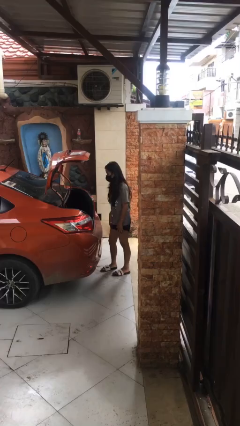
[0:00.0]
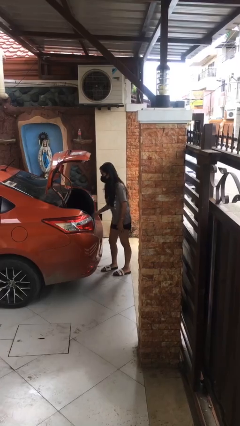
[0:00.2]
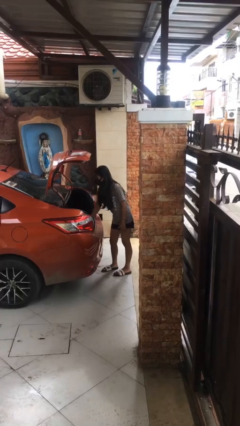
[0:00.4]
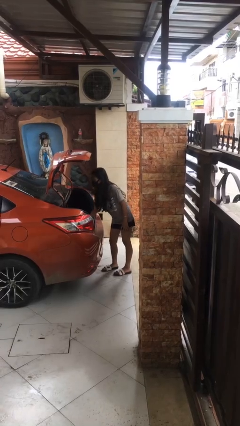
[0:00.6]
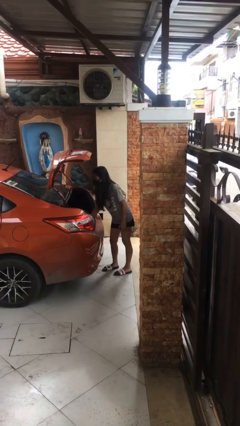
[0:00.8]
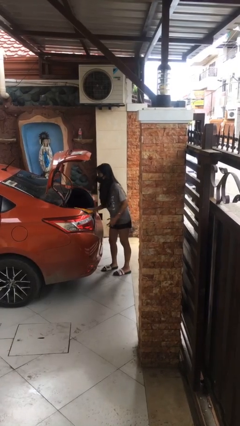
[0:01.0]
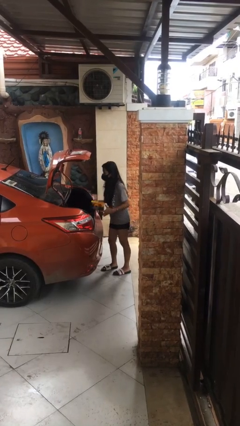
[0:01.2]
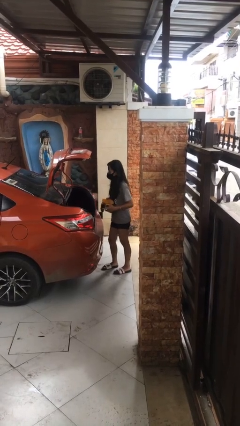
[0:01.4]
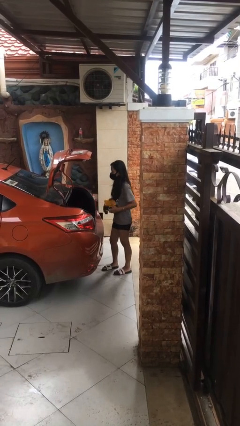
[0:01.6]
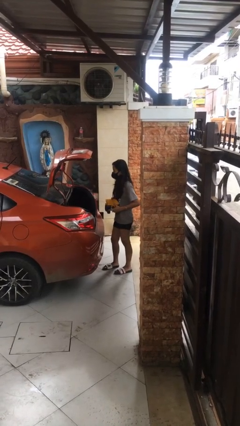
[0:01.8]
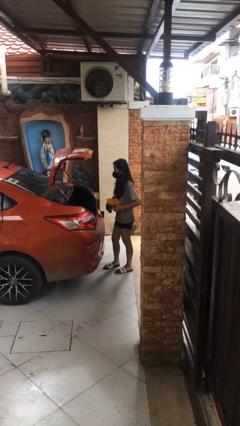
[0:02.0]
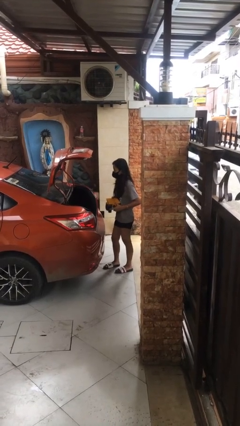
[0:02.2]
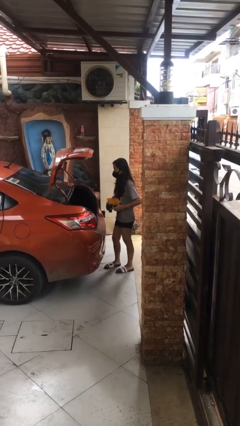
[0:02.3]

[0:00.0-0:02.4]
person unloads car

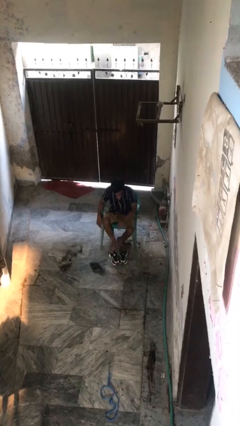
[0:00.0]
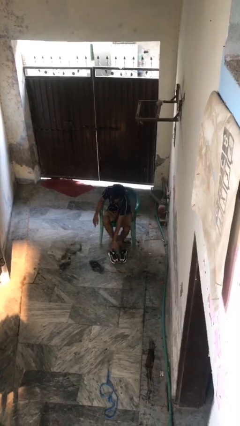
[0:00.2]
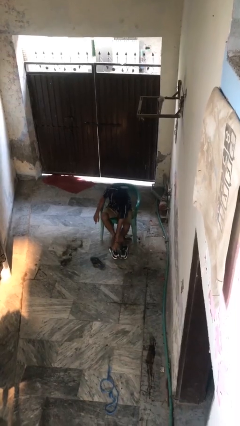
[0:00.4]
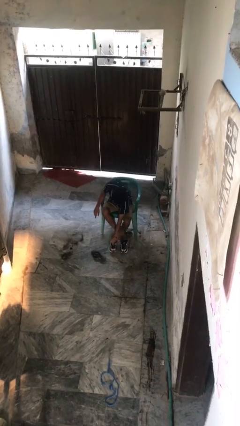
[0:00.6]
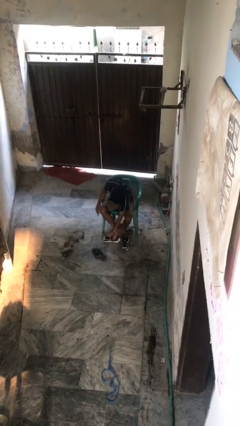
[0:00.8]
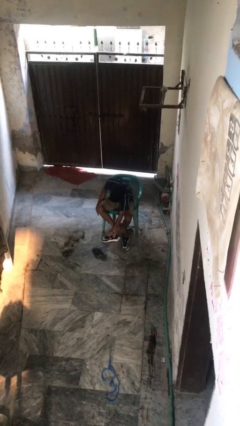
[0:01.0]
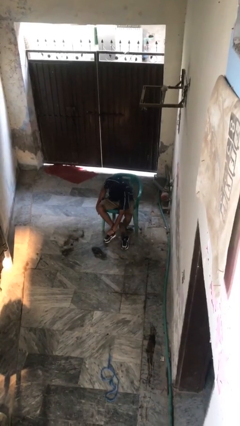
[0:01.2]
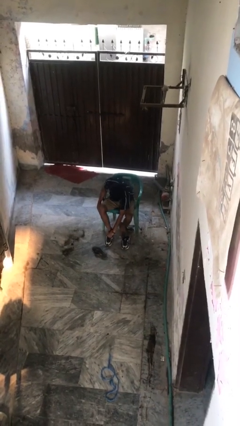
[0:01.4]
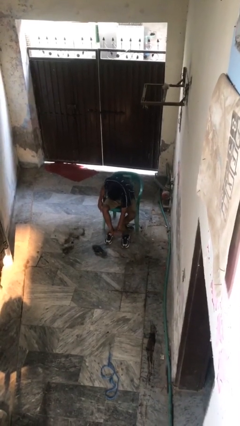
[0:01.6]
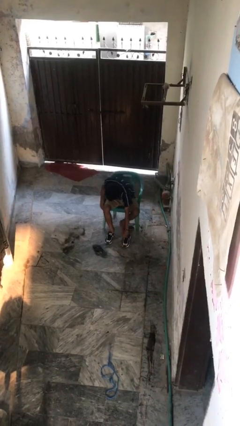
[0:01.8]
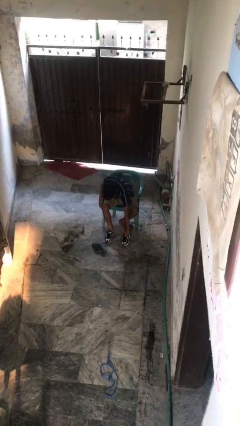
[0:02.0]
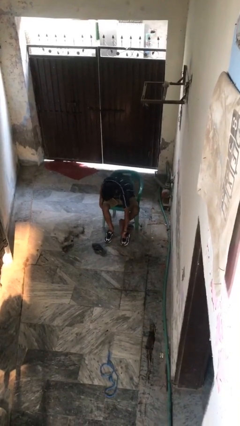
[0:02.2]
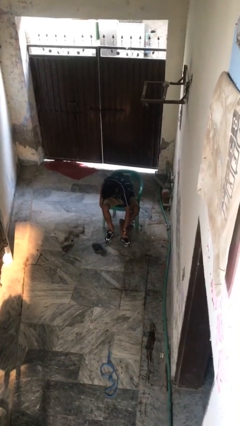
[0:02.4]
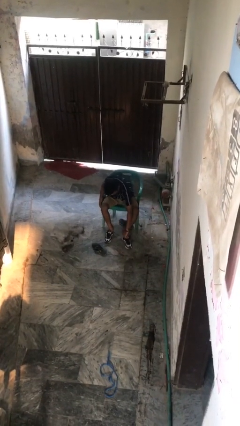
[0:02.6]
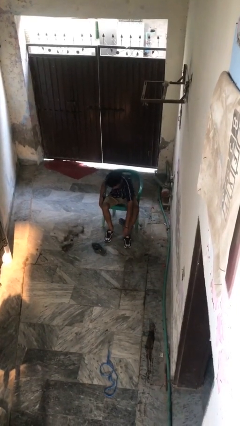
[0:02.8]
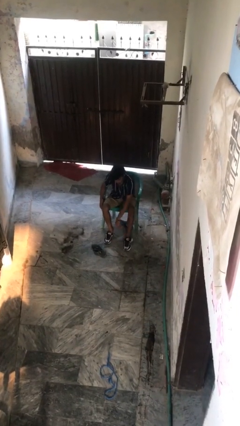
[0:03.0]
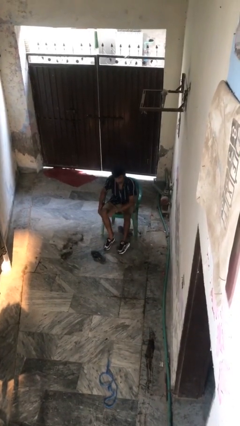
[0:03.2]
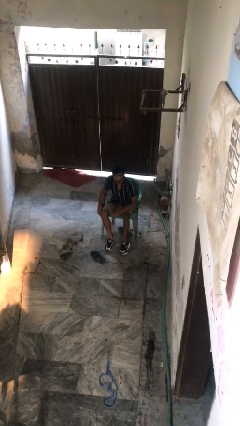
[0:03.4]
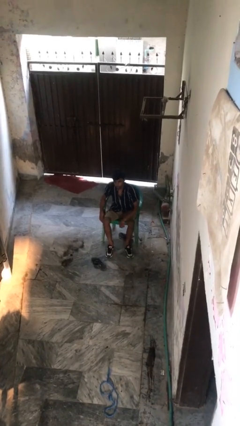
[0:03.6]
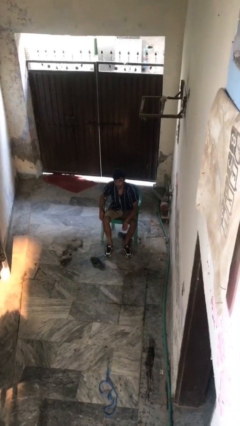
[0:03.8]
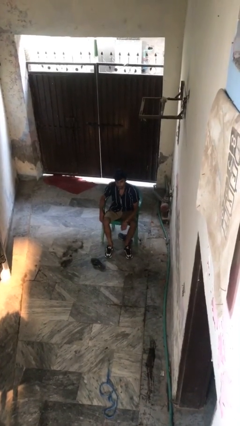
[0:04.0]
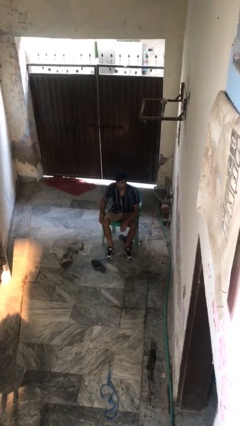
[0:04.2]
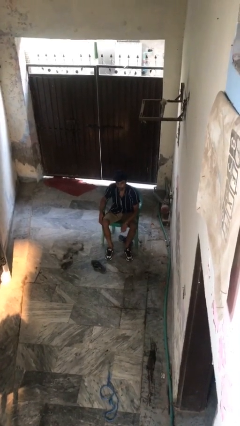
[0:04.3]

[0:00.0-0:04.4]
person puts on shoes

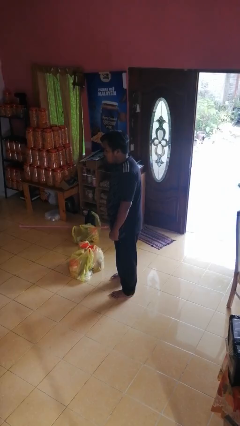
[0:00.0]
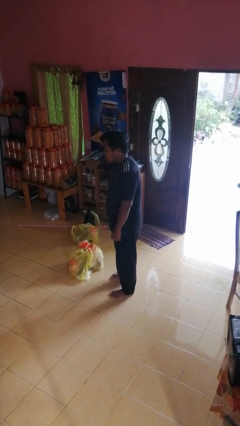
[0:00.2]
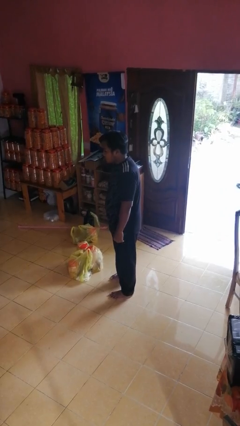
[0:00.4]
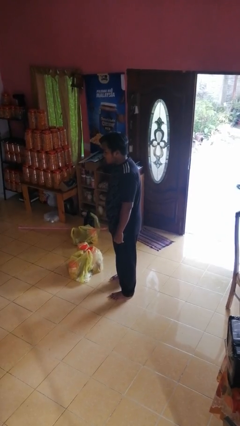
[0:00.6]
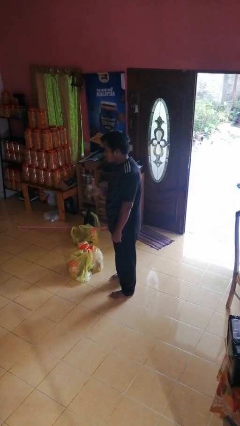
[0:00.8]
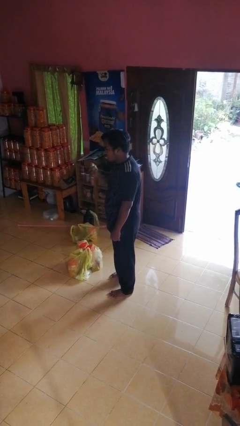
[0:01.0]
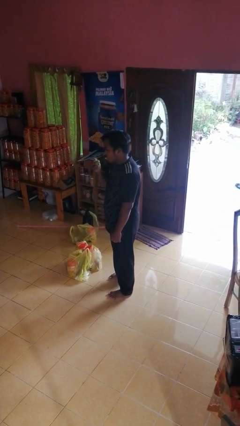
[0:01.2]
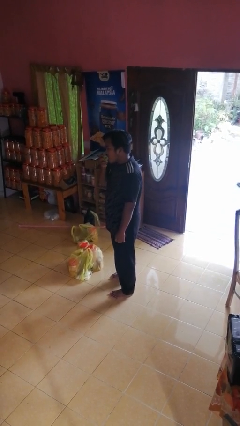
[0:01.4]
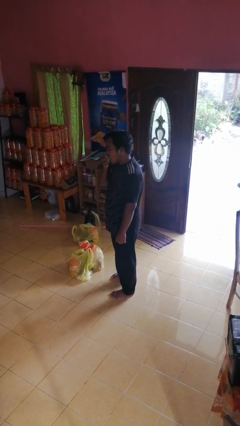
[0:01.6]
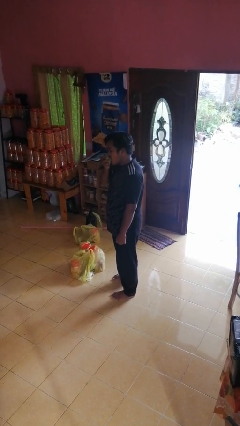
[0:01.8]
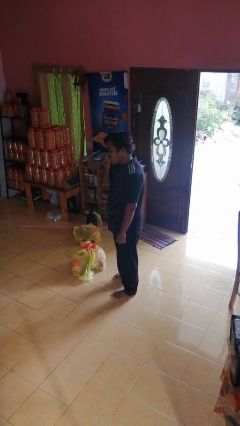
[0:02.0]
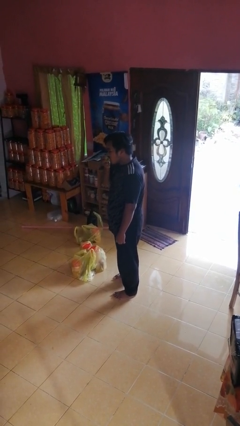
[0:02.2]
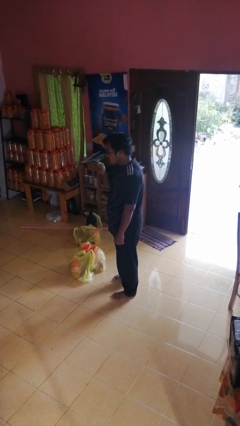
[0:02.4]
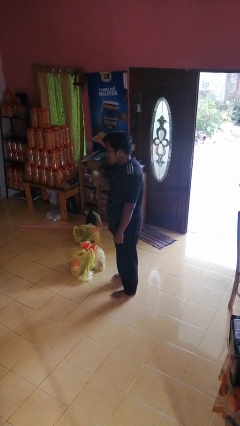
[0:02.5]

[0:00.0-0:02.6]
person eats apple

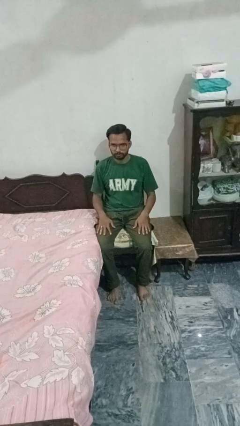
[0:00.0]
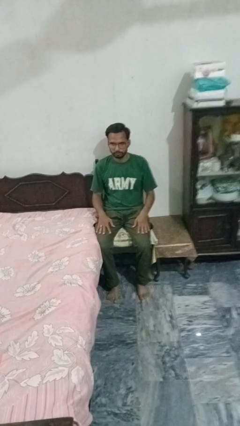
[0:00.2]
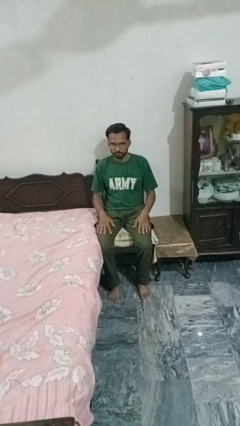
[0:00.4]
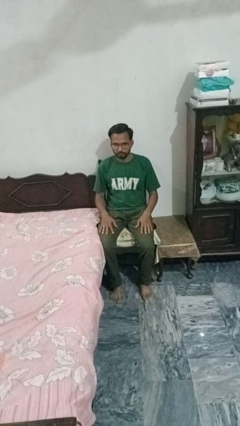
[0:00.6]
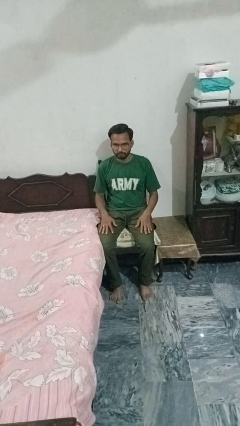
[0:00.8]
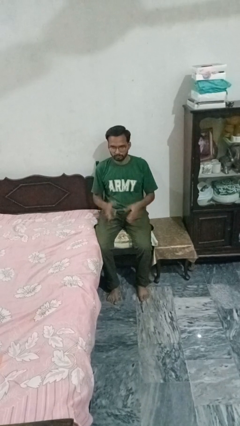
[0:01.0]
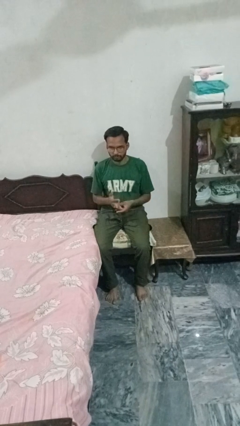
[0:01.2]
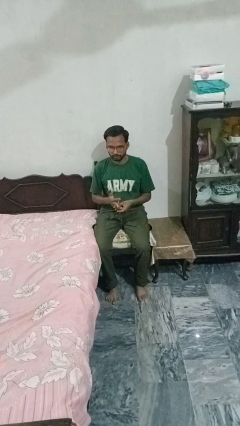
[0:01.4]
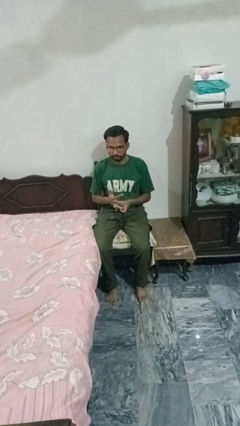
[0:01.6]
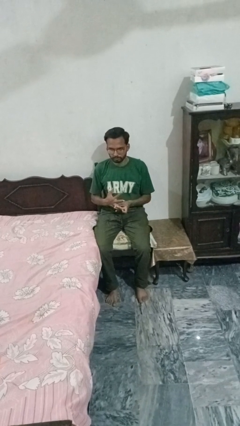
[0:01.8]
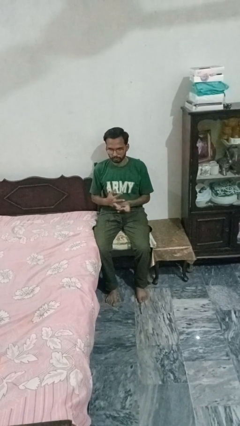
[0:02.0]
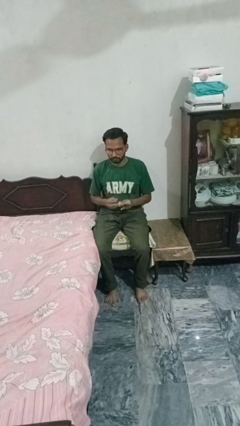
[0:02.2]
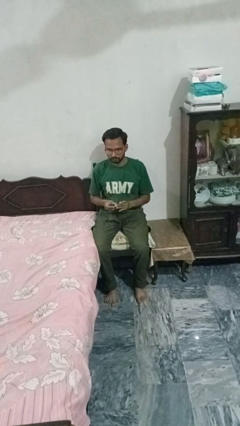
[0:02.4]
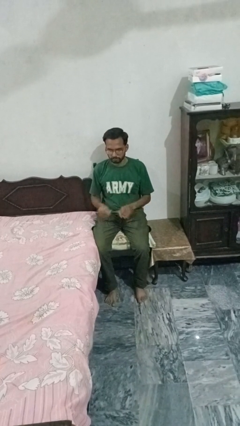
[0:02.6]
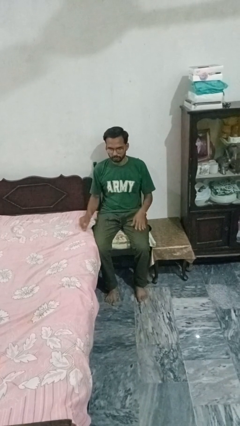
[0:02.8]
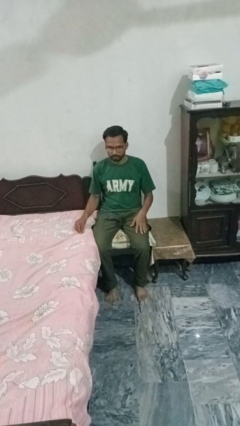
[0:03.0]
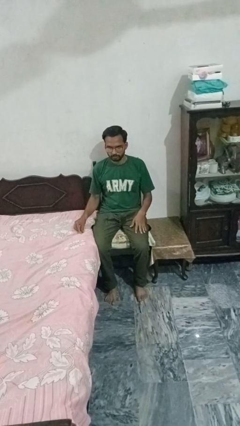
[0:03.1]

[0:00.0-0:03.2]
person takes off ring

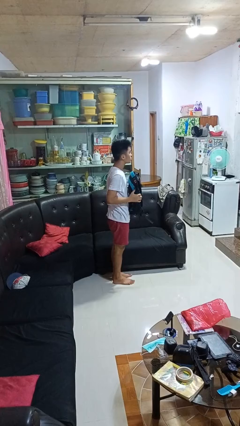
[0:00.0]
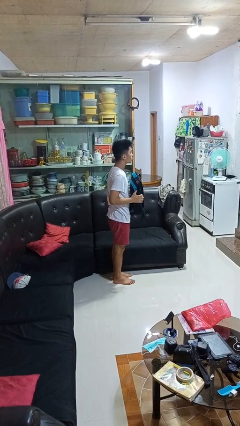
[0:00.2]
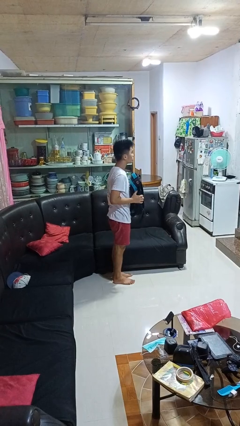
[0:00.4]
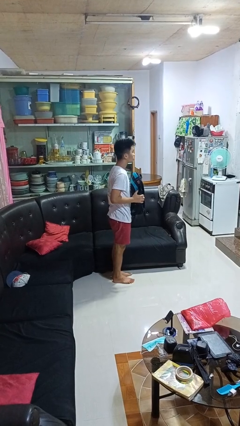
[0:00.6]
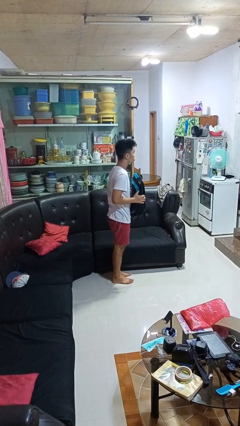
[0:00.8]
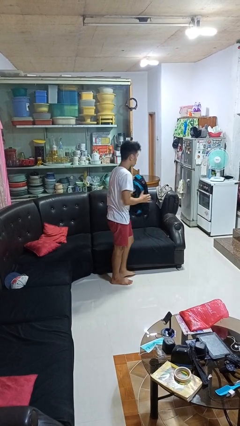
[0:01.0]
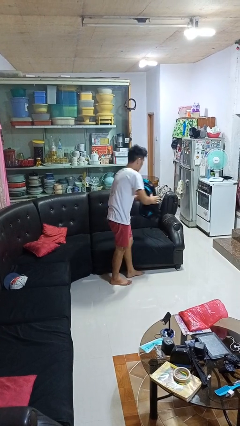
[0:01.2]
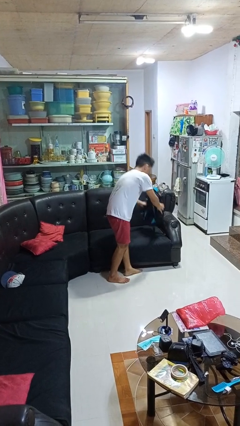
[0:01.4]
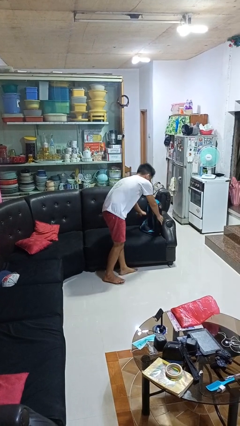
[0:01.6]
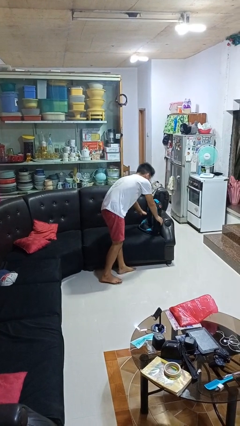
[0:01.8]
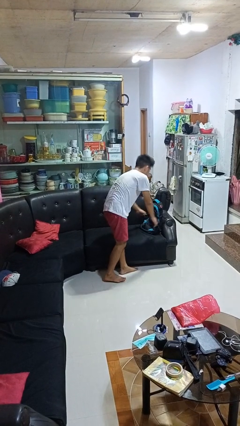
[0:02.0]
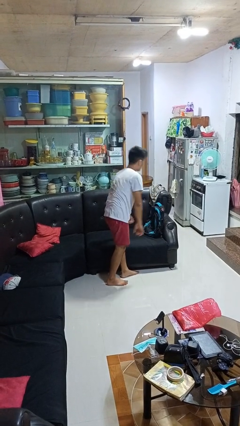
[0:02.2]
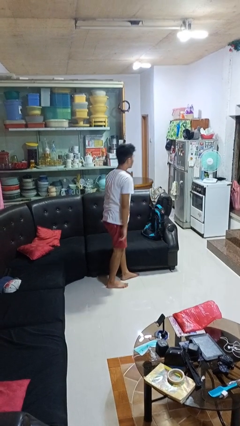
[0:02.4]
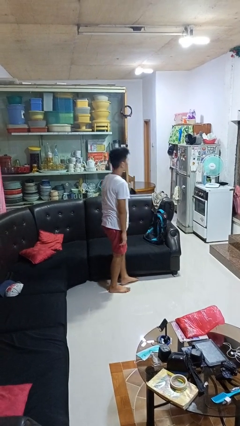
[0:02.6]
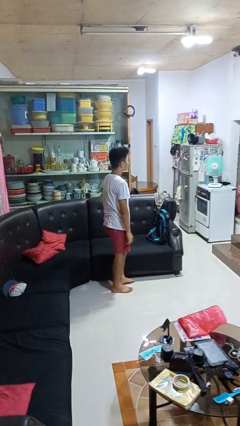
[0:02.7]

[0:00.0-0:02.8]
person puts down object on couch

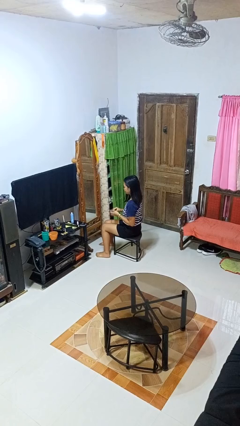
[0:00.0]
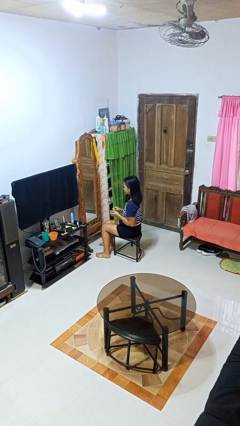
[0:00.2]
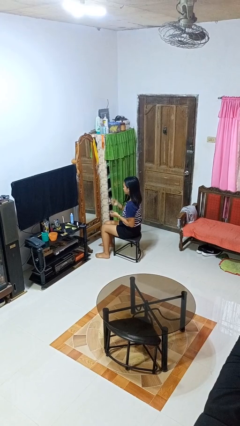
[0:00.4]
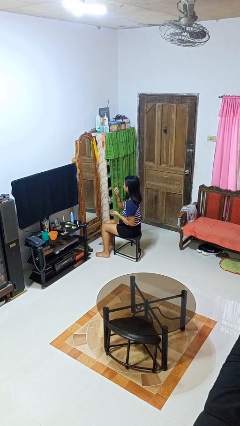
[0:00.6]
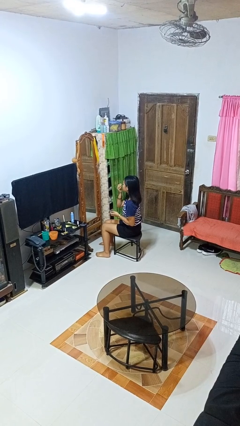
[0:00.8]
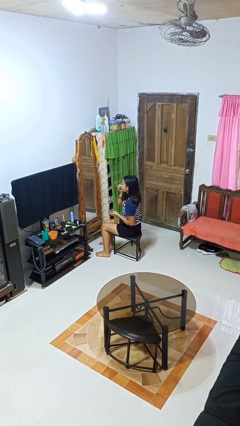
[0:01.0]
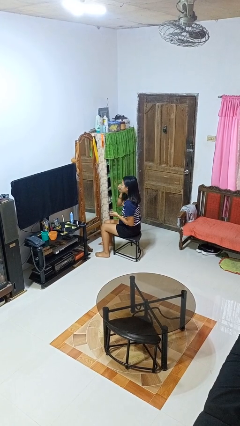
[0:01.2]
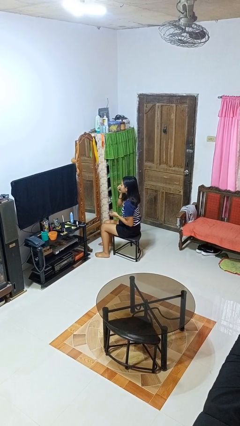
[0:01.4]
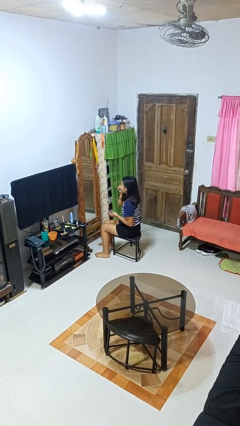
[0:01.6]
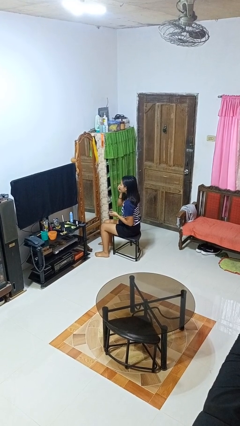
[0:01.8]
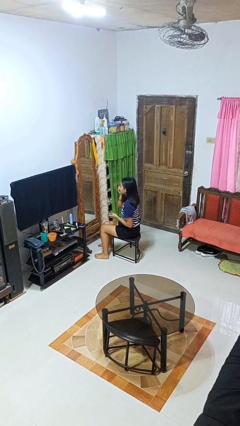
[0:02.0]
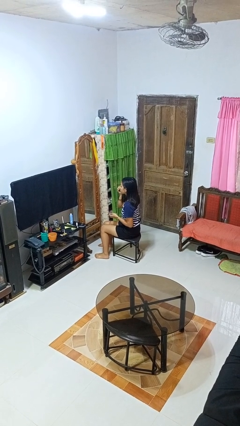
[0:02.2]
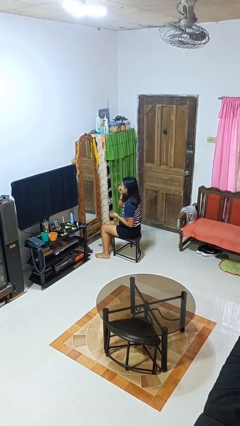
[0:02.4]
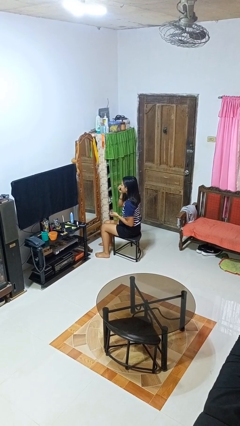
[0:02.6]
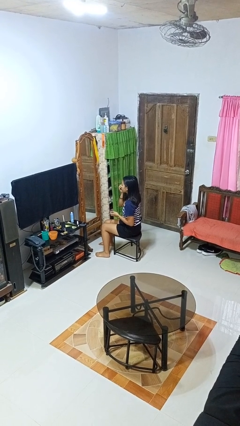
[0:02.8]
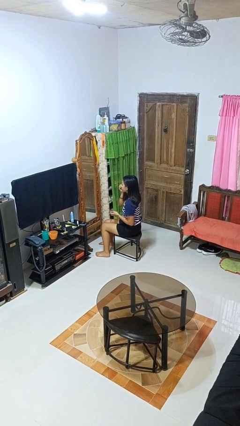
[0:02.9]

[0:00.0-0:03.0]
person applies eye makeup
